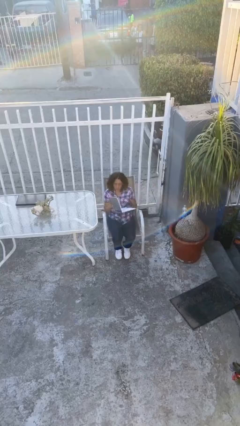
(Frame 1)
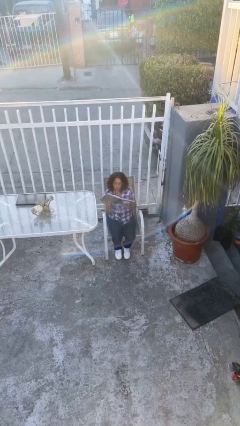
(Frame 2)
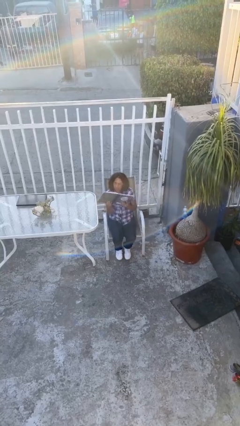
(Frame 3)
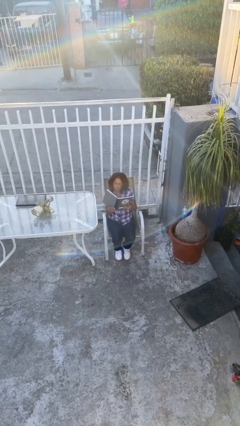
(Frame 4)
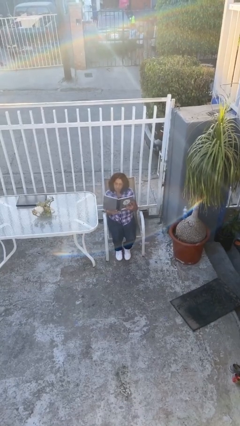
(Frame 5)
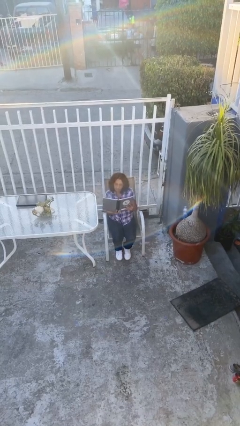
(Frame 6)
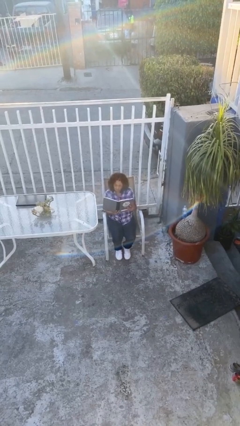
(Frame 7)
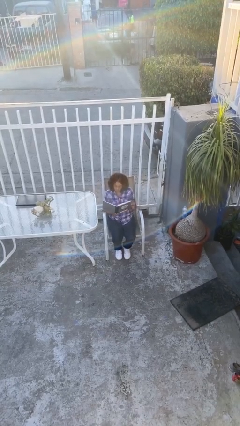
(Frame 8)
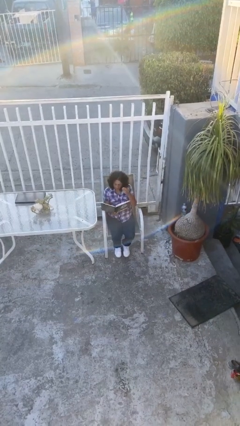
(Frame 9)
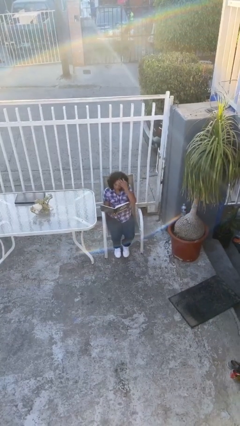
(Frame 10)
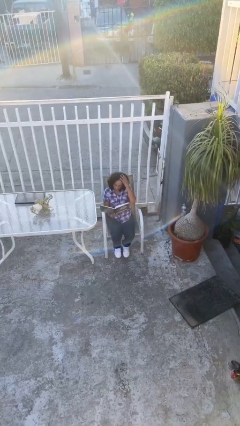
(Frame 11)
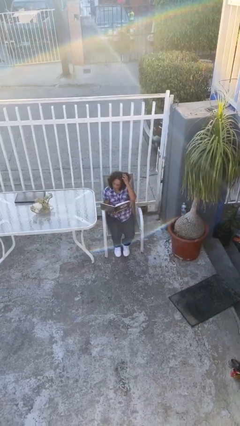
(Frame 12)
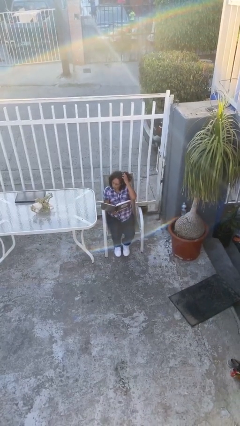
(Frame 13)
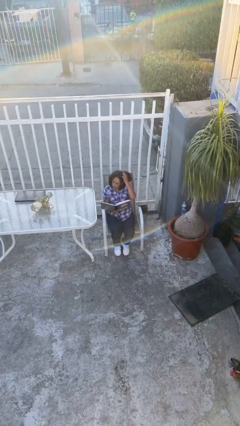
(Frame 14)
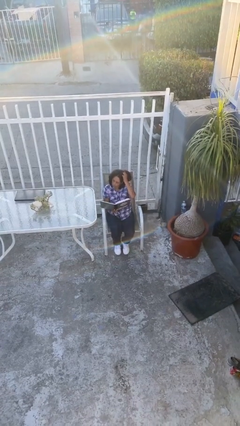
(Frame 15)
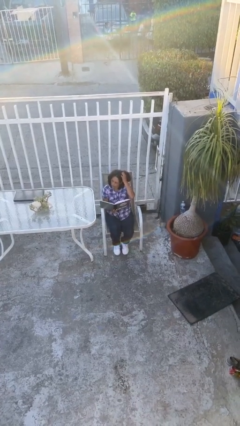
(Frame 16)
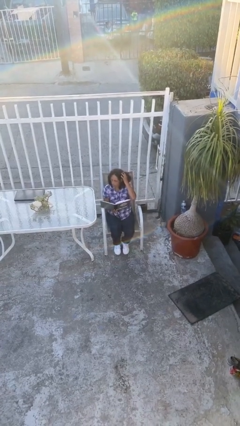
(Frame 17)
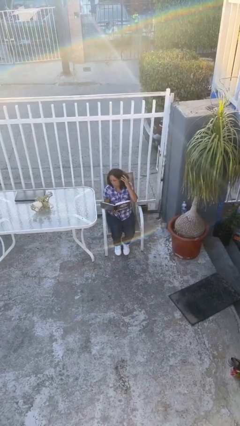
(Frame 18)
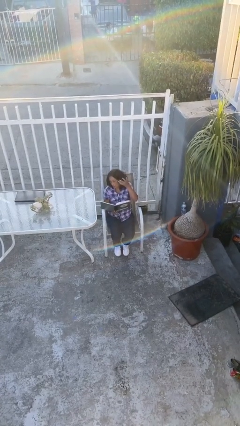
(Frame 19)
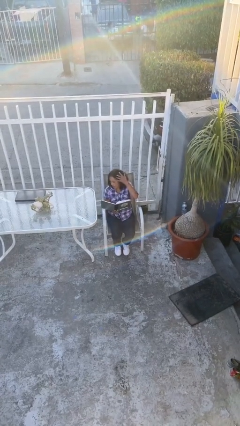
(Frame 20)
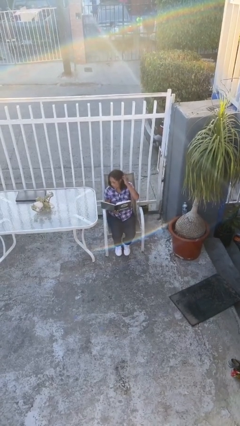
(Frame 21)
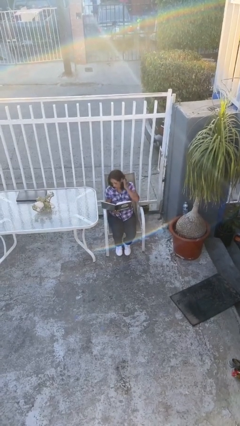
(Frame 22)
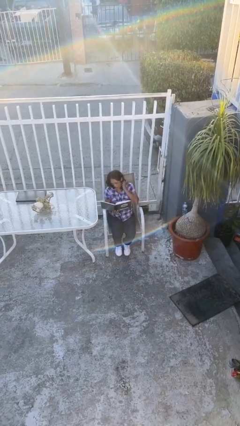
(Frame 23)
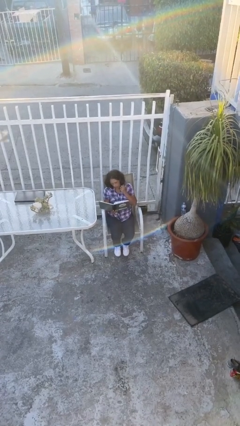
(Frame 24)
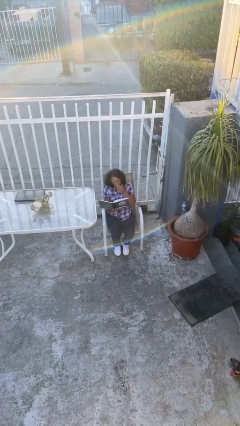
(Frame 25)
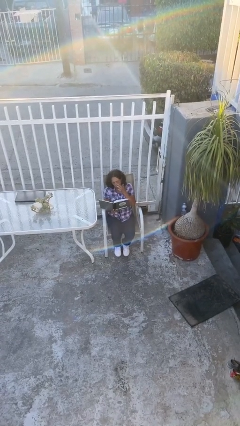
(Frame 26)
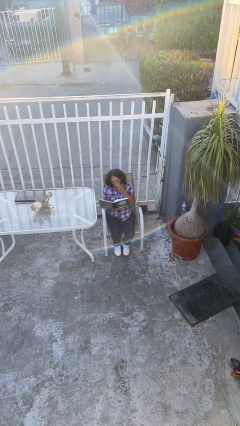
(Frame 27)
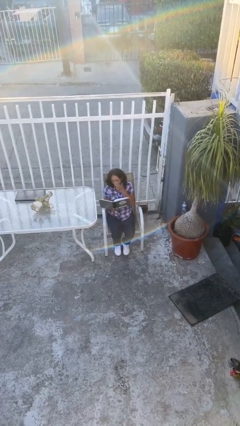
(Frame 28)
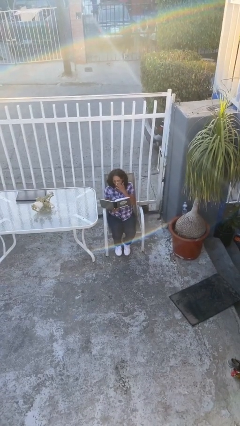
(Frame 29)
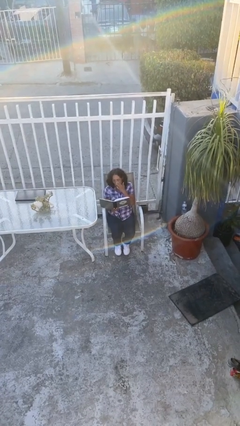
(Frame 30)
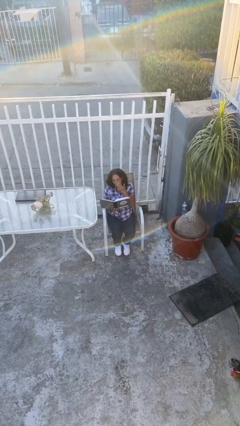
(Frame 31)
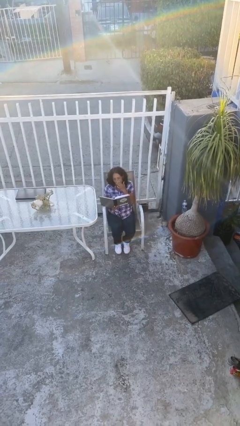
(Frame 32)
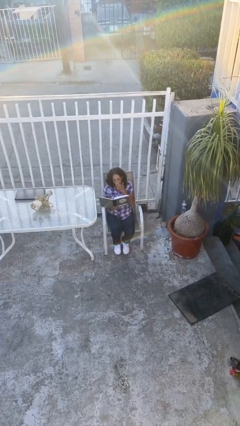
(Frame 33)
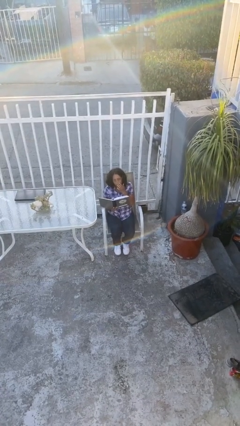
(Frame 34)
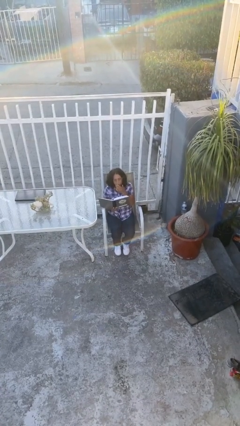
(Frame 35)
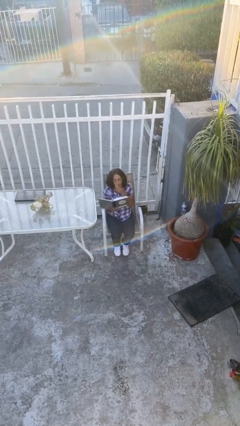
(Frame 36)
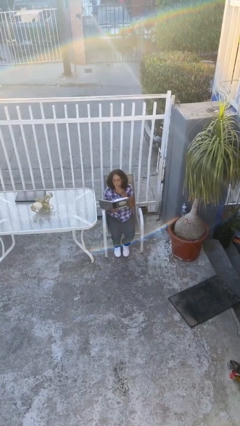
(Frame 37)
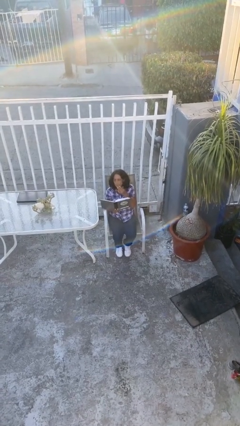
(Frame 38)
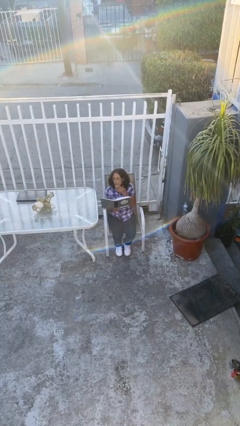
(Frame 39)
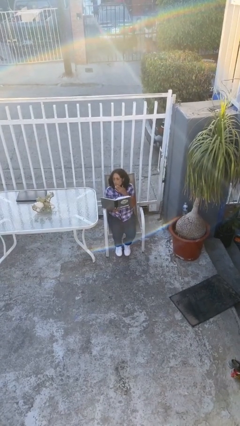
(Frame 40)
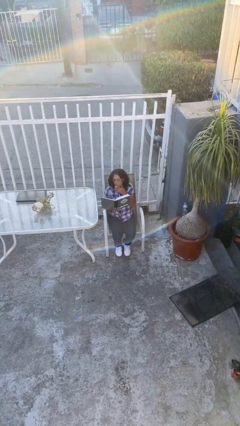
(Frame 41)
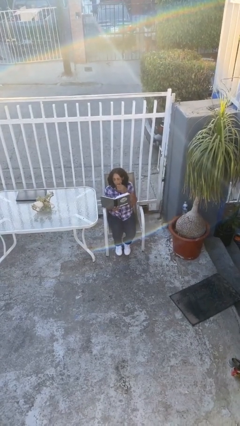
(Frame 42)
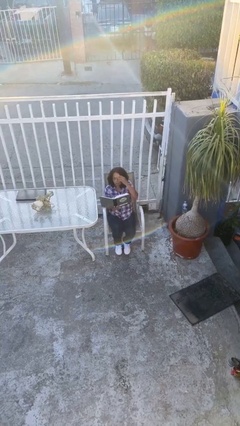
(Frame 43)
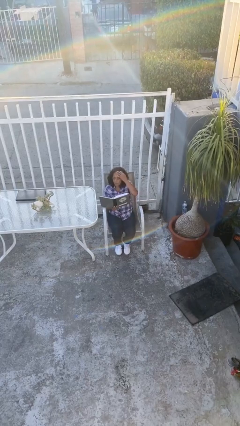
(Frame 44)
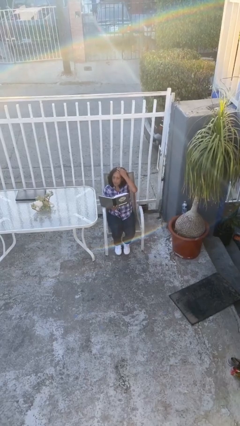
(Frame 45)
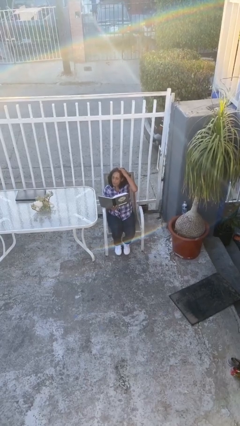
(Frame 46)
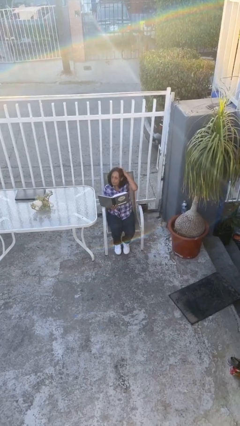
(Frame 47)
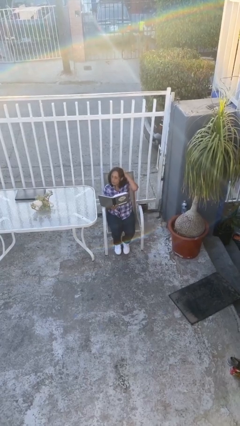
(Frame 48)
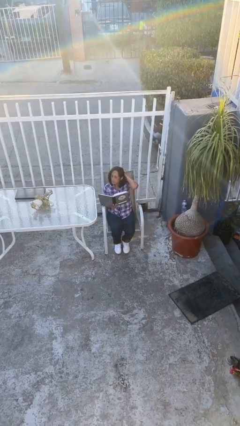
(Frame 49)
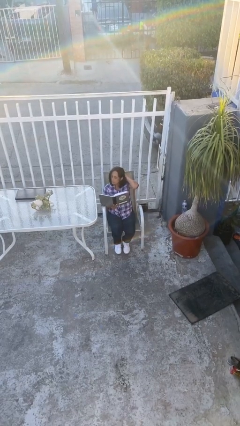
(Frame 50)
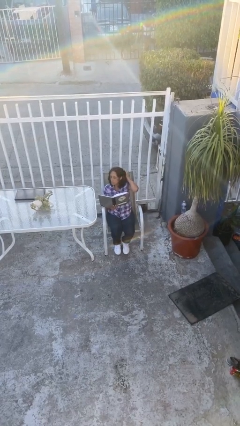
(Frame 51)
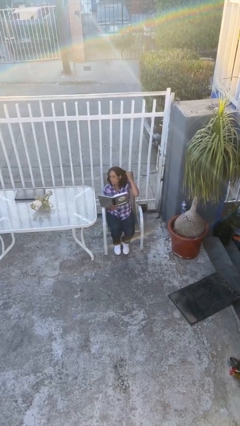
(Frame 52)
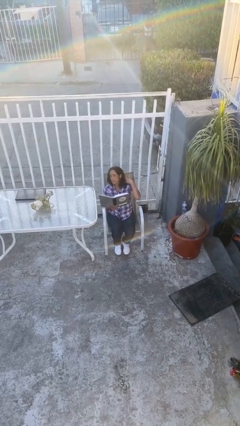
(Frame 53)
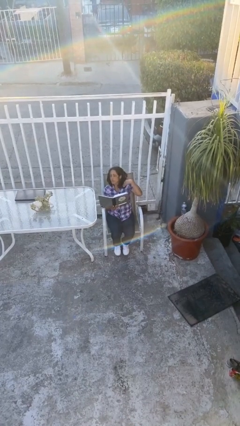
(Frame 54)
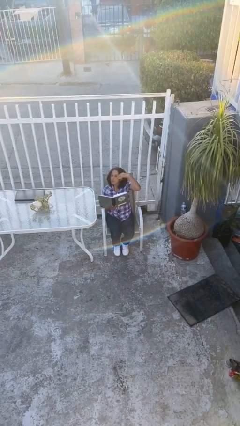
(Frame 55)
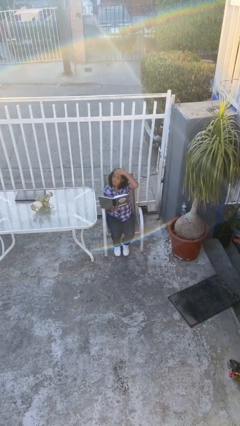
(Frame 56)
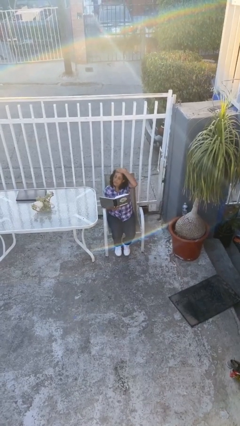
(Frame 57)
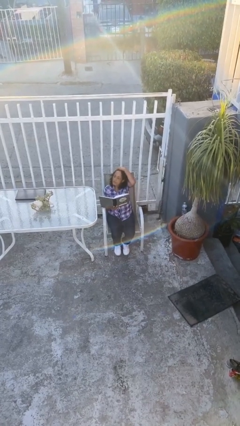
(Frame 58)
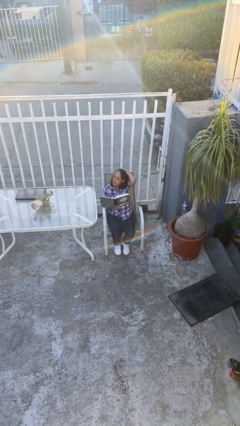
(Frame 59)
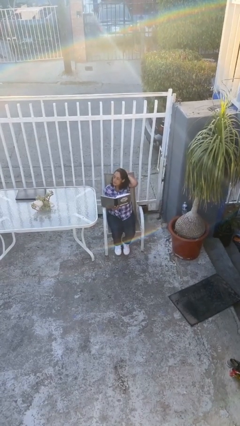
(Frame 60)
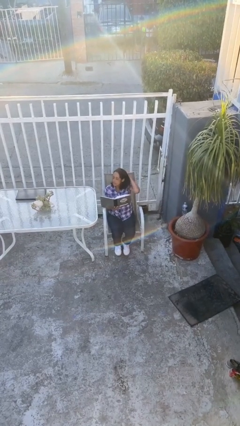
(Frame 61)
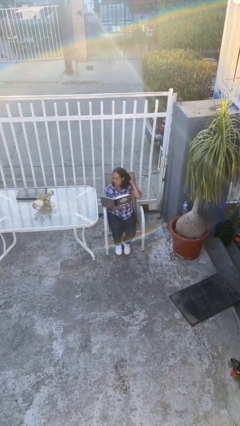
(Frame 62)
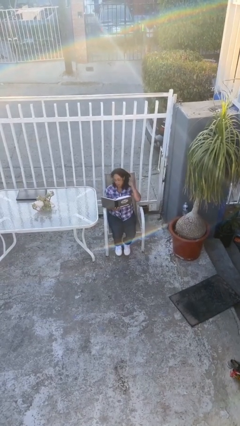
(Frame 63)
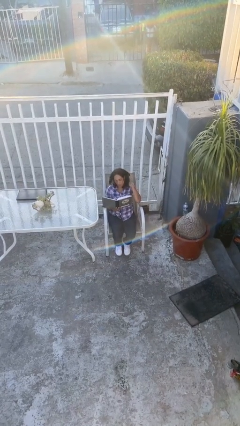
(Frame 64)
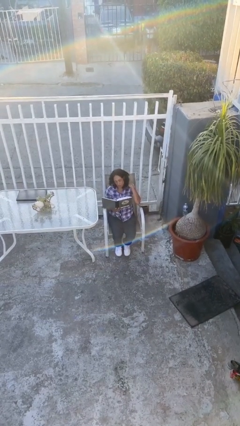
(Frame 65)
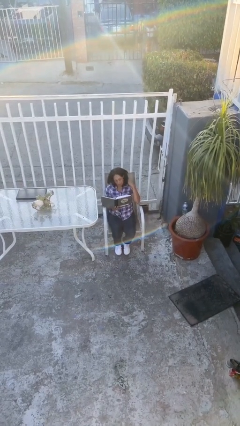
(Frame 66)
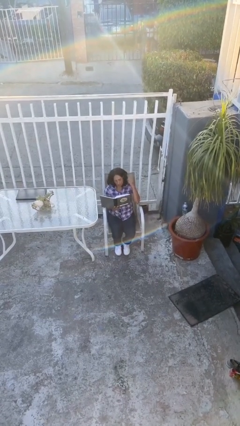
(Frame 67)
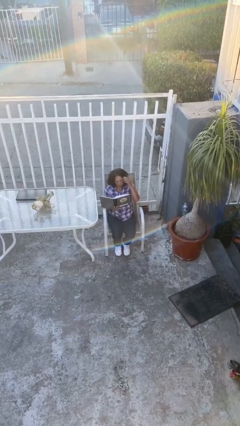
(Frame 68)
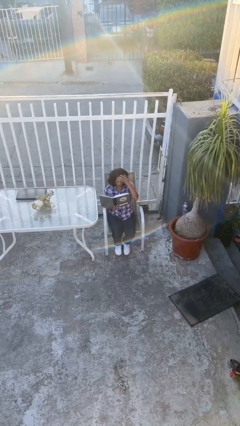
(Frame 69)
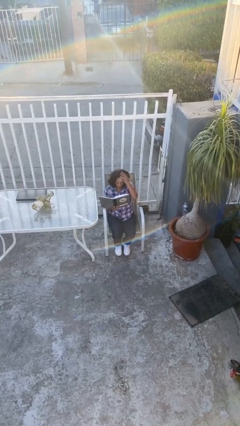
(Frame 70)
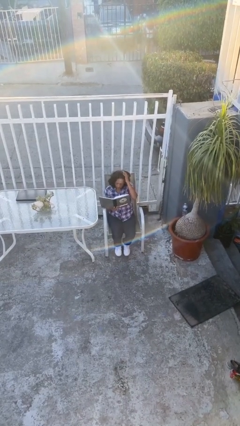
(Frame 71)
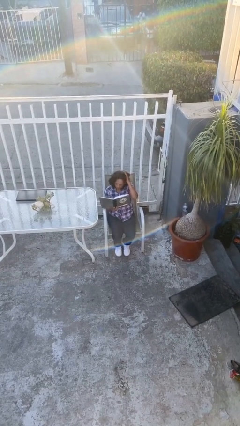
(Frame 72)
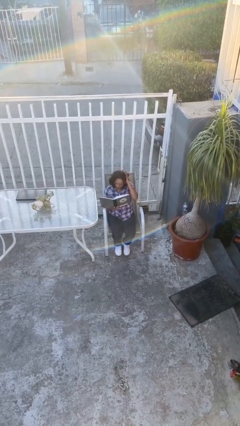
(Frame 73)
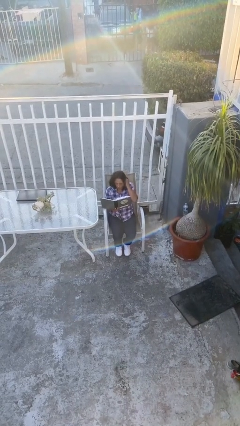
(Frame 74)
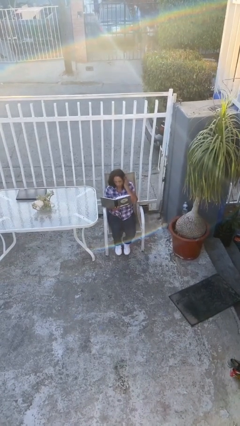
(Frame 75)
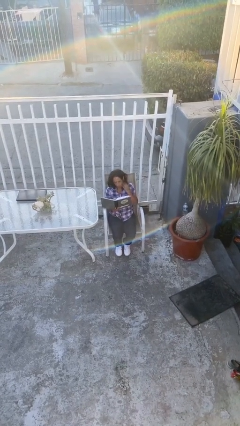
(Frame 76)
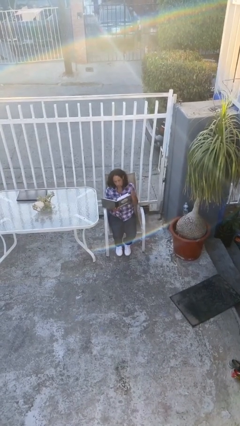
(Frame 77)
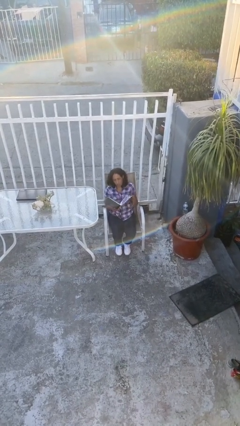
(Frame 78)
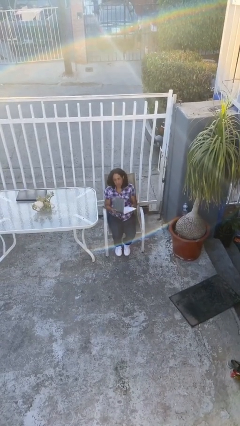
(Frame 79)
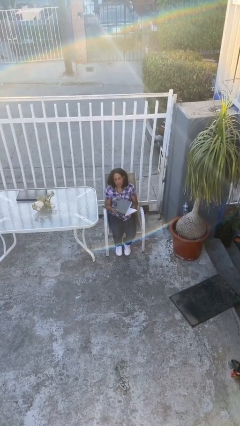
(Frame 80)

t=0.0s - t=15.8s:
person reads document

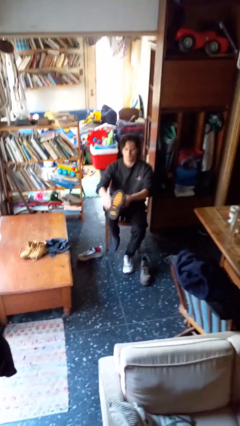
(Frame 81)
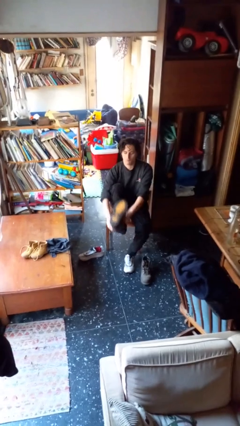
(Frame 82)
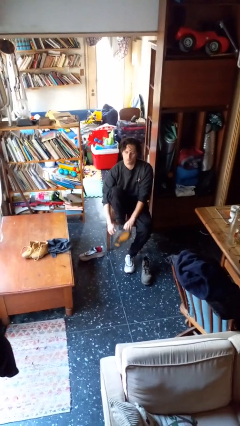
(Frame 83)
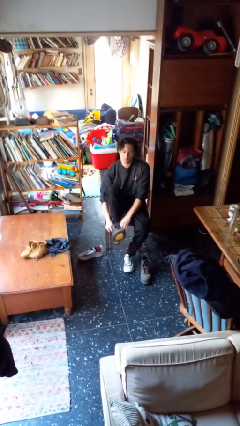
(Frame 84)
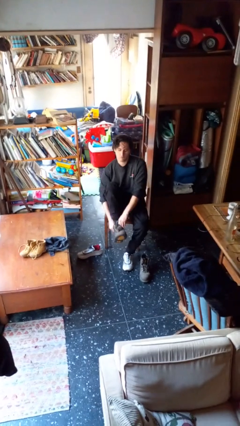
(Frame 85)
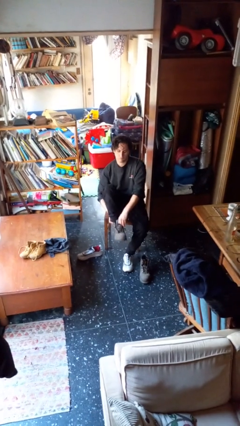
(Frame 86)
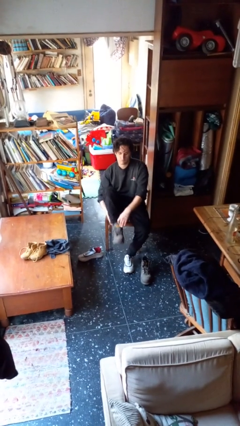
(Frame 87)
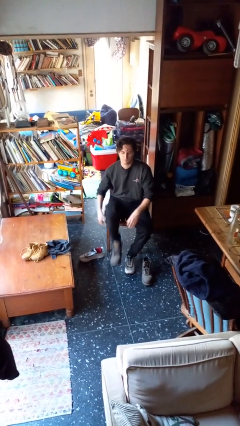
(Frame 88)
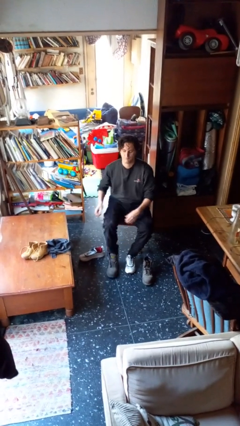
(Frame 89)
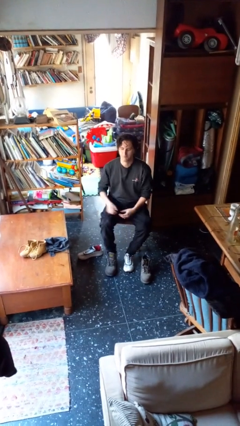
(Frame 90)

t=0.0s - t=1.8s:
person puts on boots

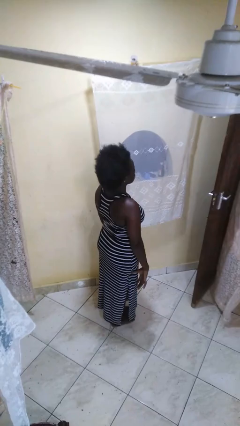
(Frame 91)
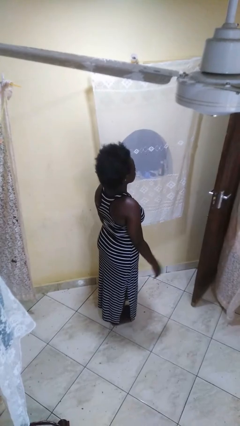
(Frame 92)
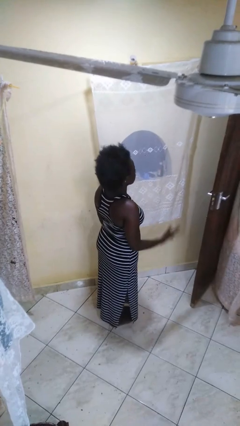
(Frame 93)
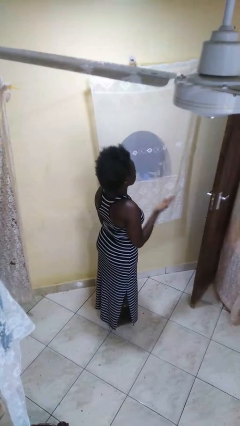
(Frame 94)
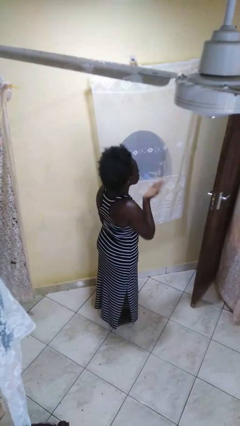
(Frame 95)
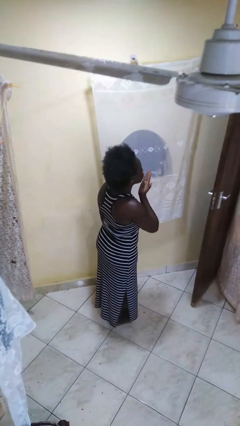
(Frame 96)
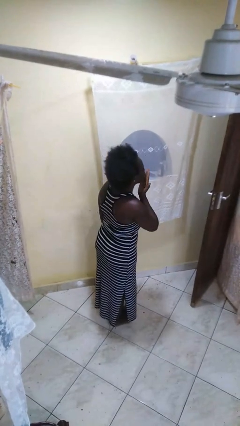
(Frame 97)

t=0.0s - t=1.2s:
person gestures blow kiss
